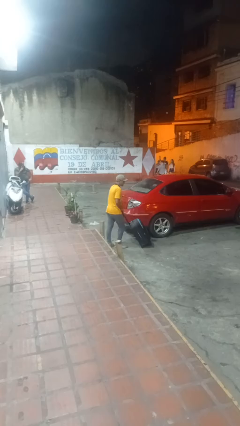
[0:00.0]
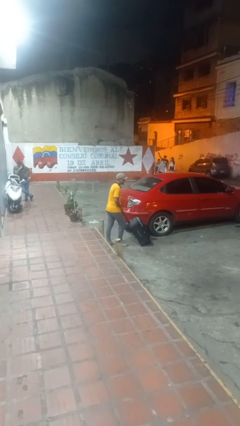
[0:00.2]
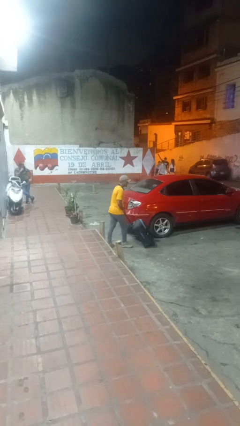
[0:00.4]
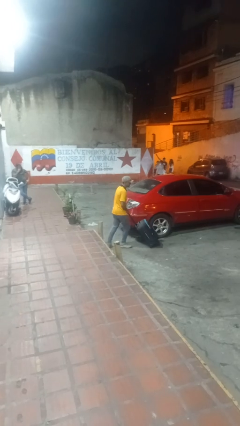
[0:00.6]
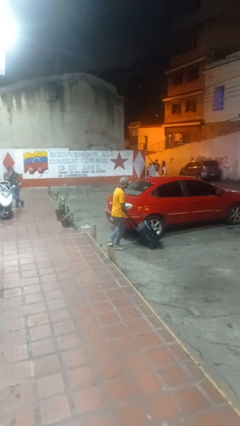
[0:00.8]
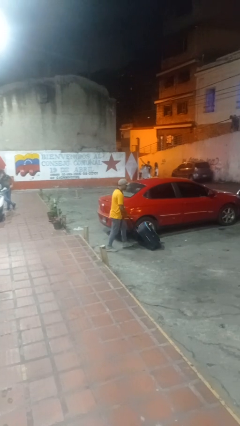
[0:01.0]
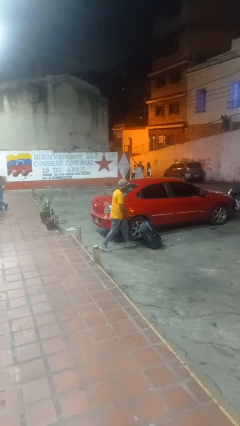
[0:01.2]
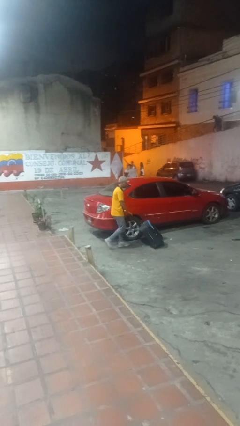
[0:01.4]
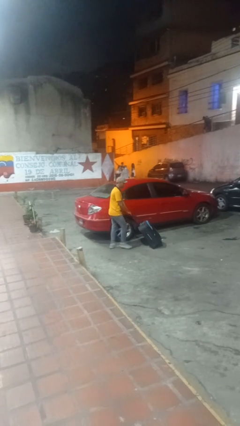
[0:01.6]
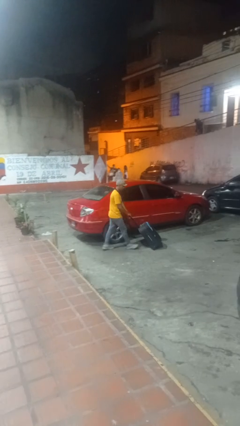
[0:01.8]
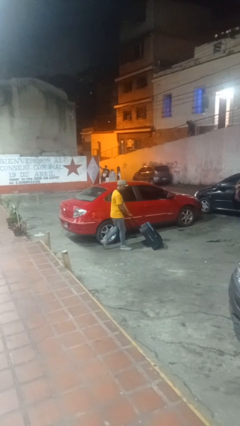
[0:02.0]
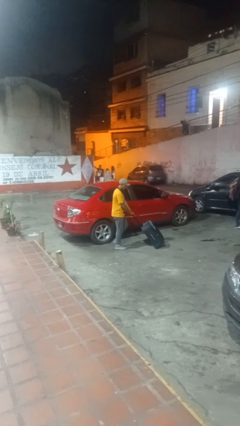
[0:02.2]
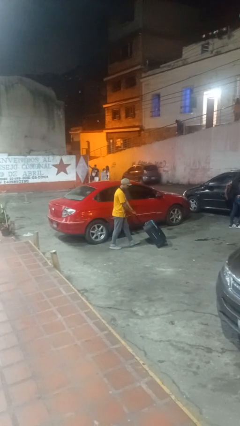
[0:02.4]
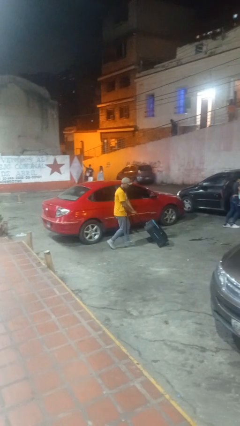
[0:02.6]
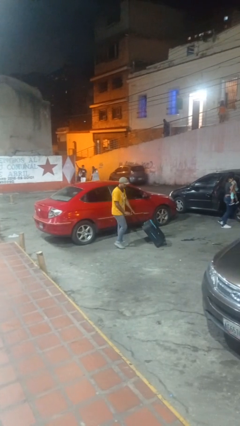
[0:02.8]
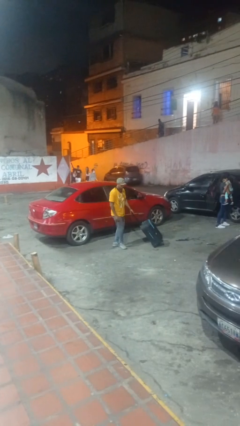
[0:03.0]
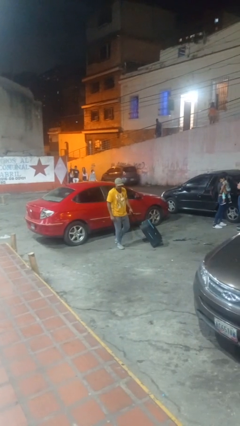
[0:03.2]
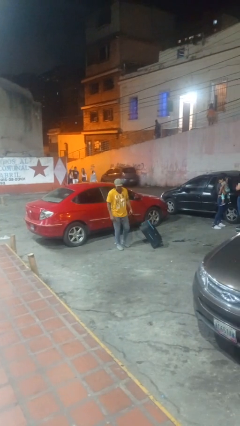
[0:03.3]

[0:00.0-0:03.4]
person pushes wheeled cart

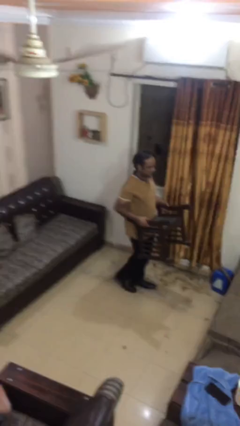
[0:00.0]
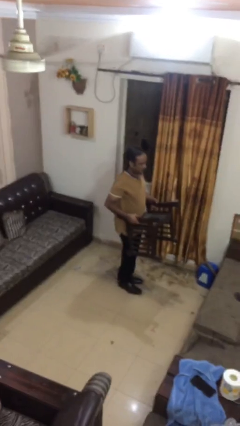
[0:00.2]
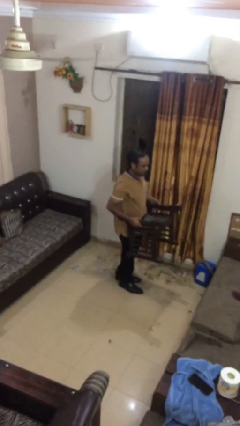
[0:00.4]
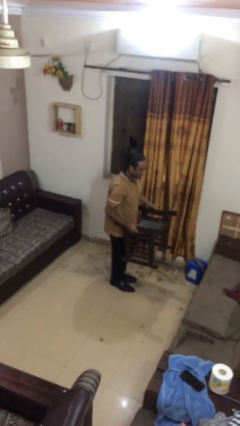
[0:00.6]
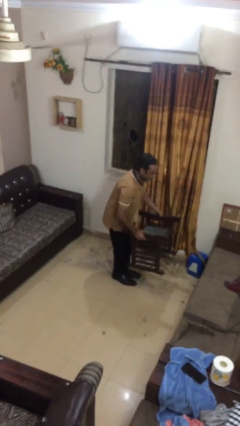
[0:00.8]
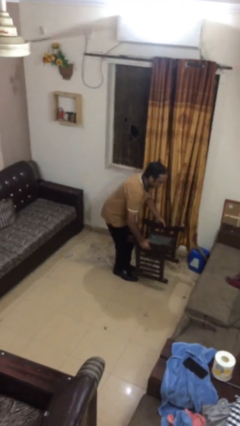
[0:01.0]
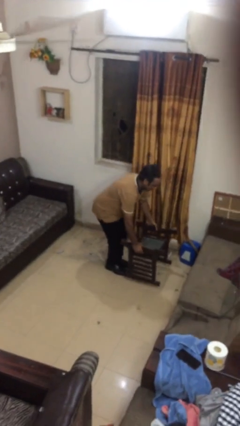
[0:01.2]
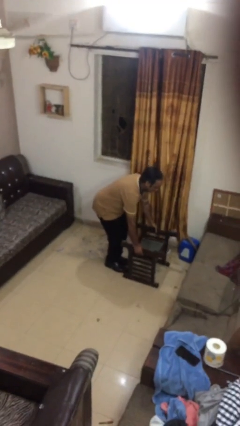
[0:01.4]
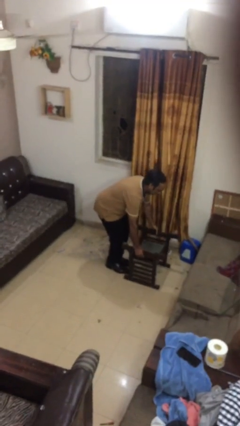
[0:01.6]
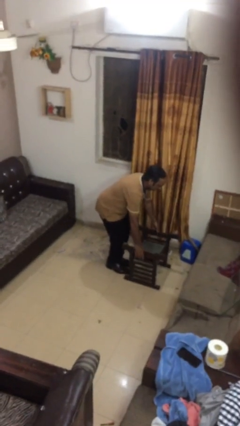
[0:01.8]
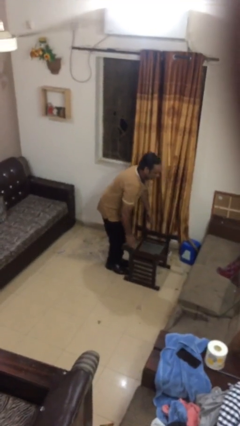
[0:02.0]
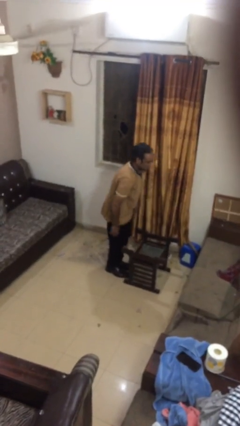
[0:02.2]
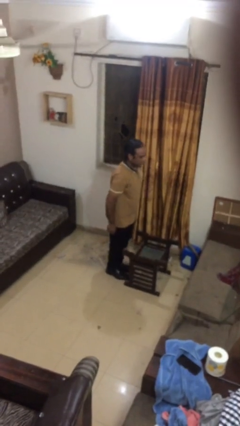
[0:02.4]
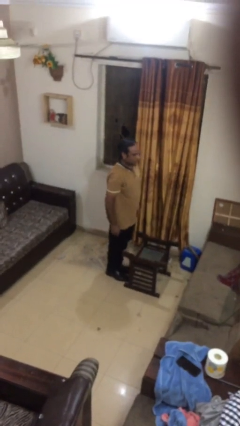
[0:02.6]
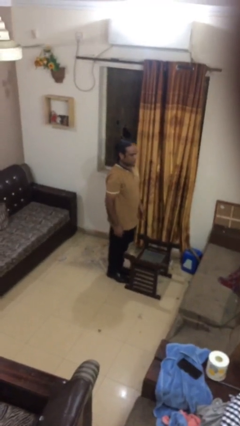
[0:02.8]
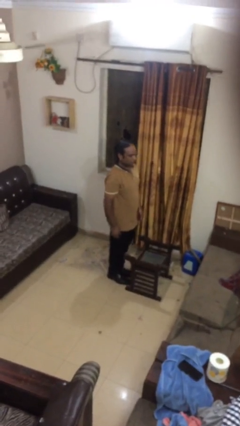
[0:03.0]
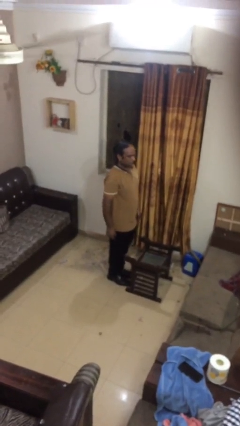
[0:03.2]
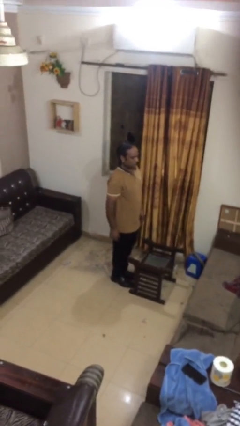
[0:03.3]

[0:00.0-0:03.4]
person puts down object on floor

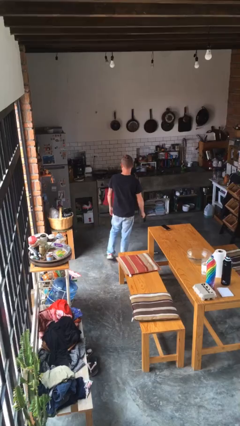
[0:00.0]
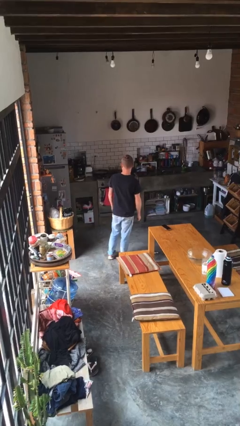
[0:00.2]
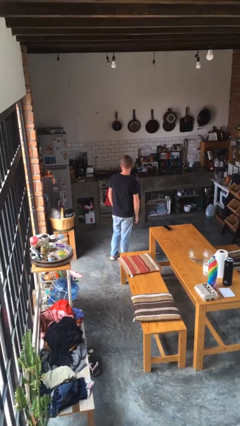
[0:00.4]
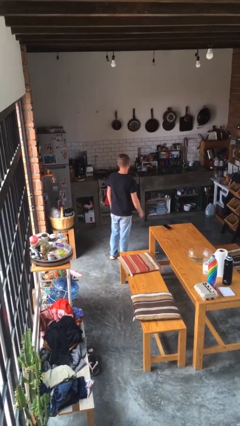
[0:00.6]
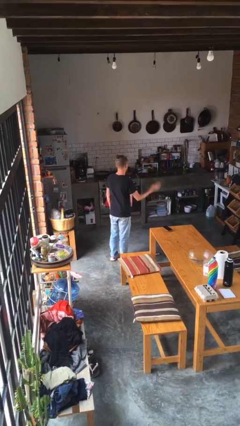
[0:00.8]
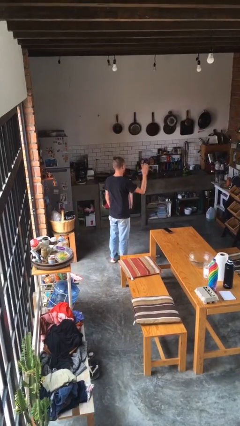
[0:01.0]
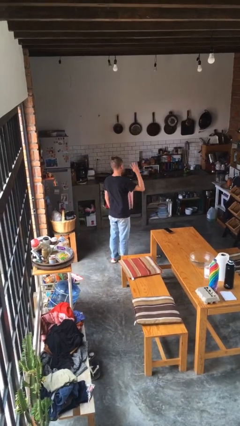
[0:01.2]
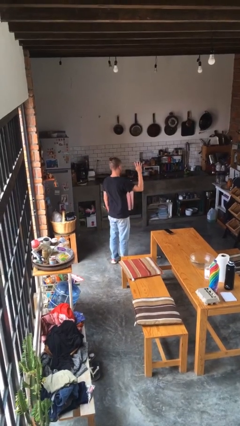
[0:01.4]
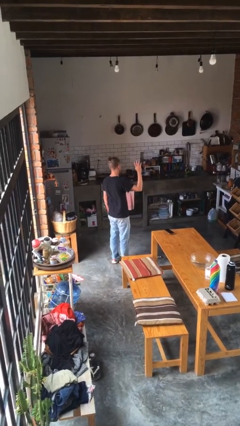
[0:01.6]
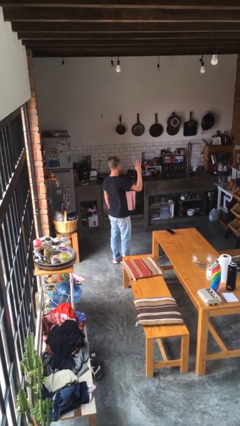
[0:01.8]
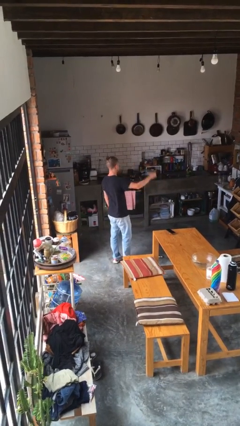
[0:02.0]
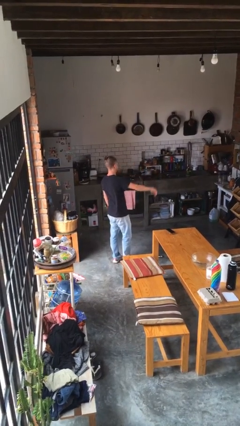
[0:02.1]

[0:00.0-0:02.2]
person gestures number four

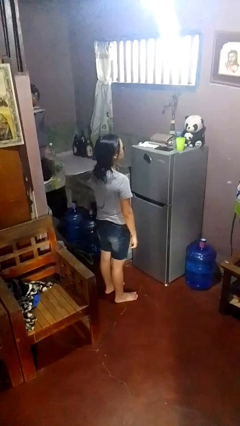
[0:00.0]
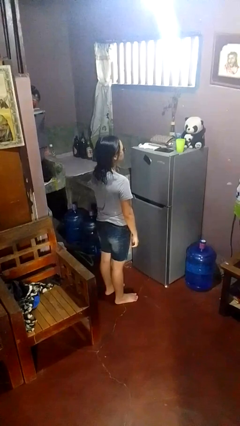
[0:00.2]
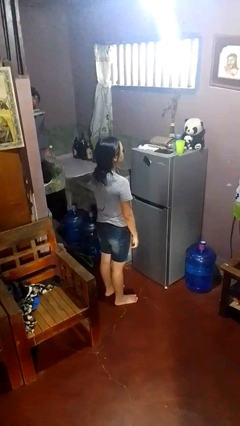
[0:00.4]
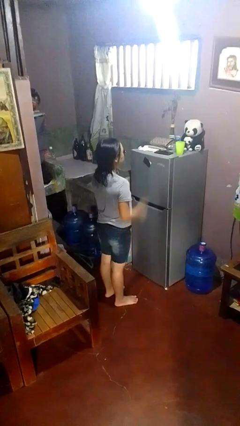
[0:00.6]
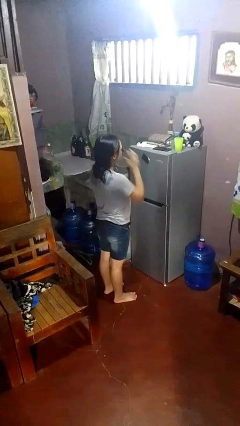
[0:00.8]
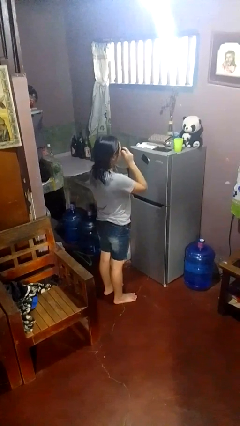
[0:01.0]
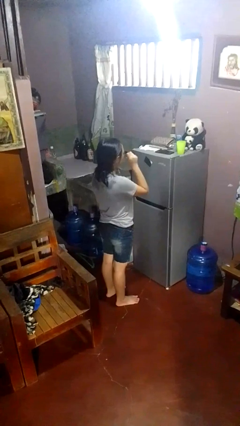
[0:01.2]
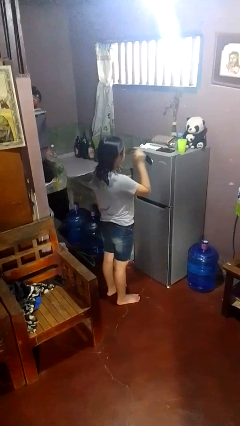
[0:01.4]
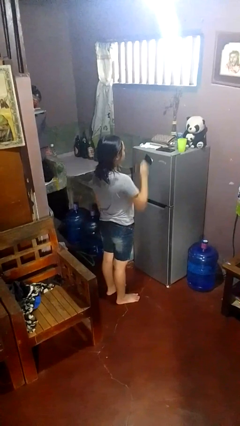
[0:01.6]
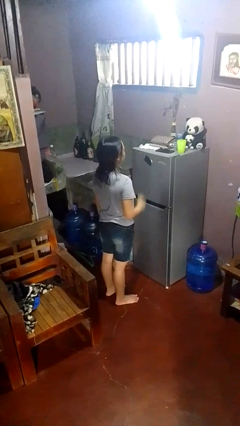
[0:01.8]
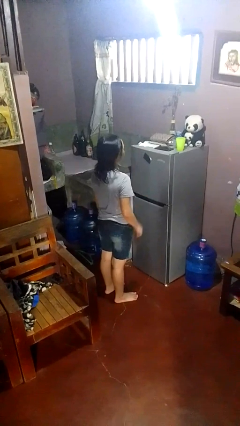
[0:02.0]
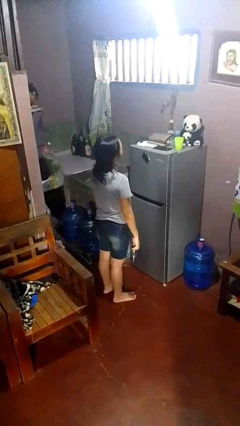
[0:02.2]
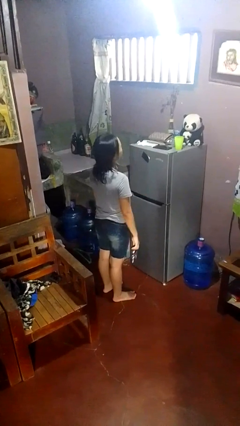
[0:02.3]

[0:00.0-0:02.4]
person takes off sunglasses

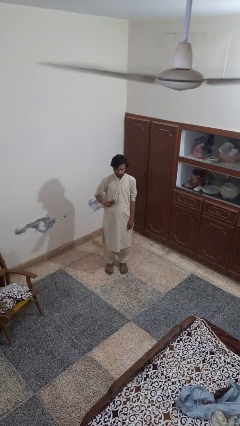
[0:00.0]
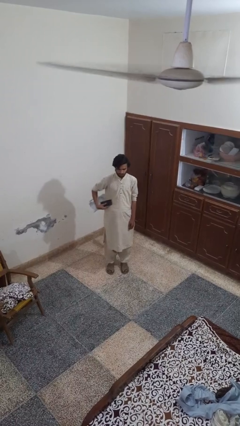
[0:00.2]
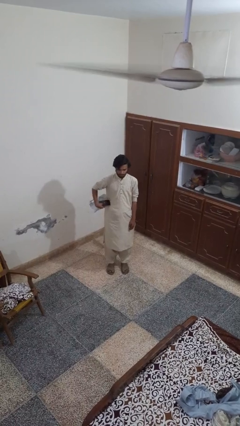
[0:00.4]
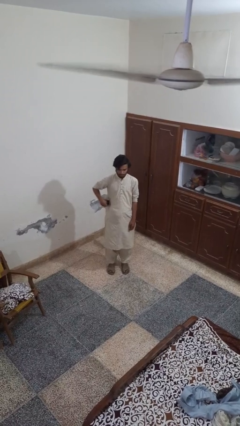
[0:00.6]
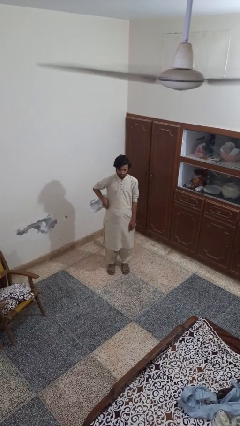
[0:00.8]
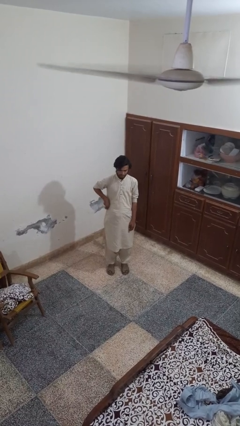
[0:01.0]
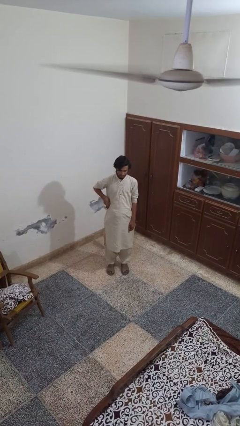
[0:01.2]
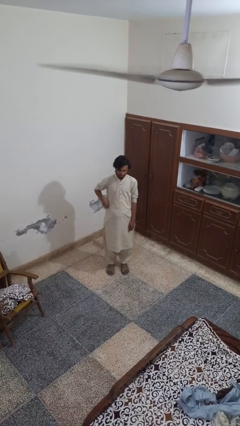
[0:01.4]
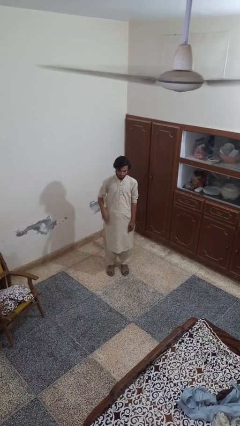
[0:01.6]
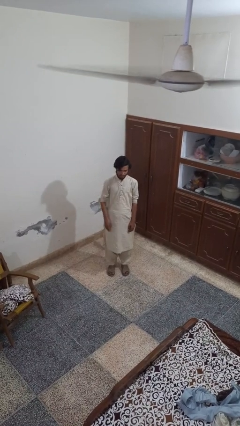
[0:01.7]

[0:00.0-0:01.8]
person puts phone into pocket

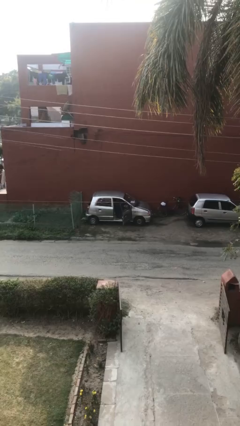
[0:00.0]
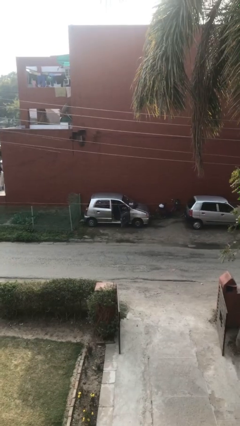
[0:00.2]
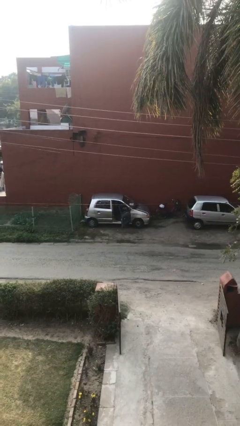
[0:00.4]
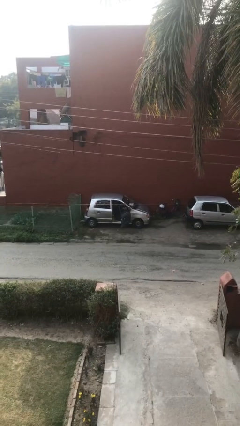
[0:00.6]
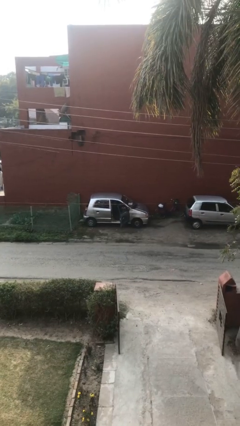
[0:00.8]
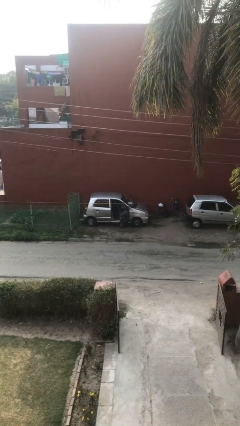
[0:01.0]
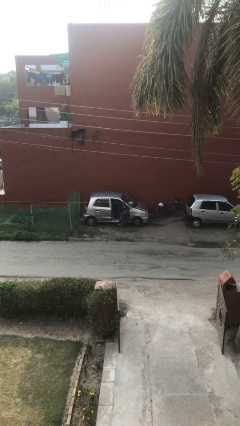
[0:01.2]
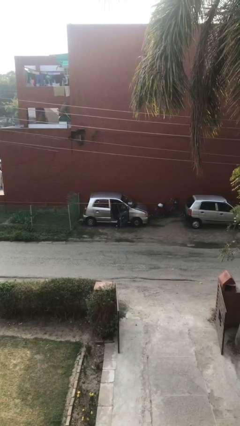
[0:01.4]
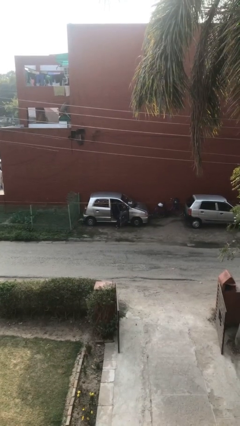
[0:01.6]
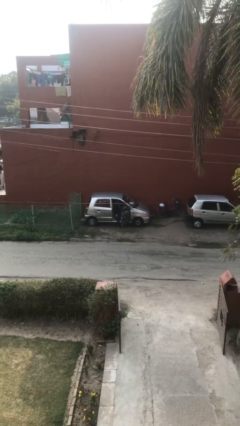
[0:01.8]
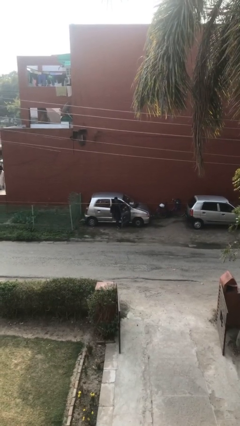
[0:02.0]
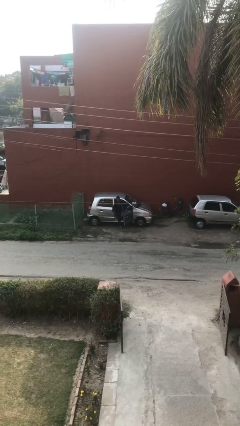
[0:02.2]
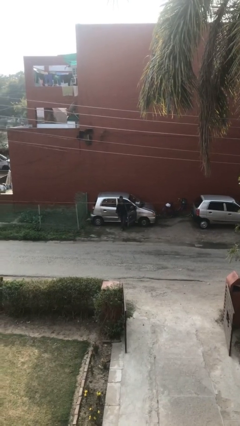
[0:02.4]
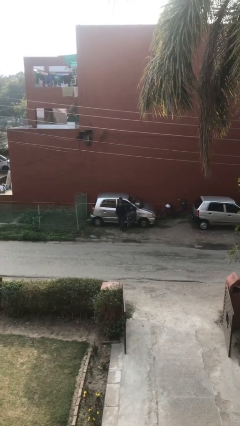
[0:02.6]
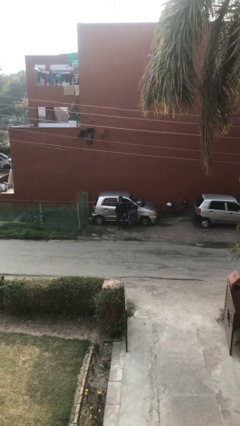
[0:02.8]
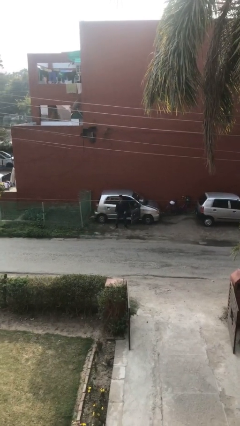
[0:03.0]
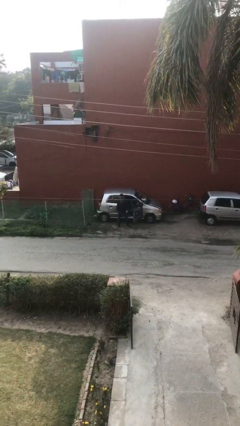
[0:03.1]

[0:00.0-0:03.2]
person exits car

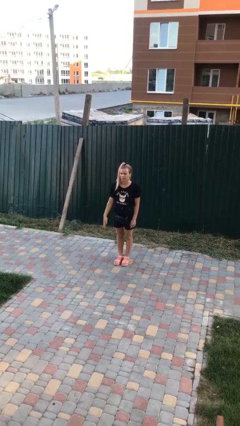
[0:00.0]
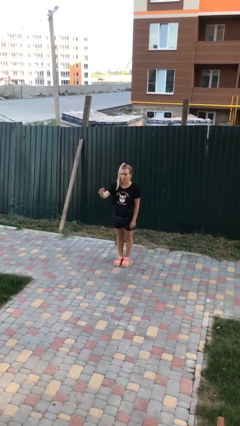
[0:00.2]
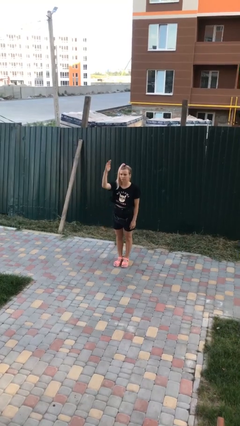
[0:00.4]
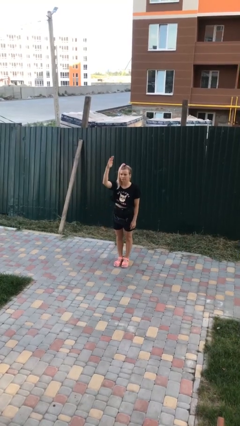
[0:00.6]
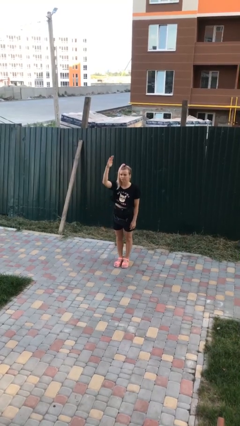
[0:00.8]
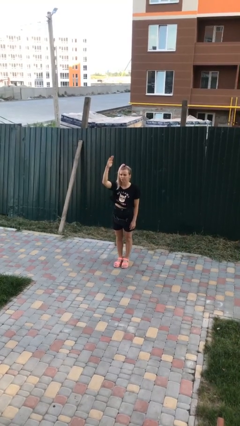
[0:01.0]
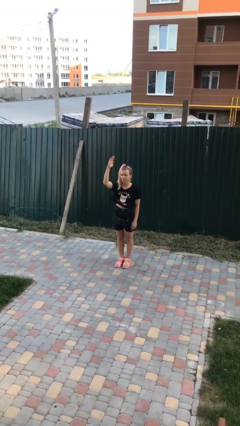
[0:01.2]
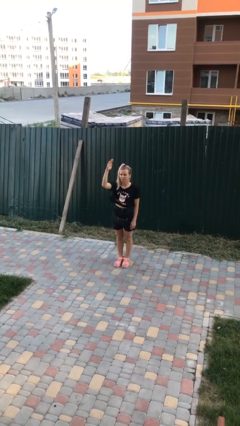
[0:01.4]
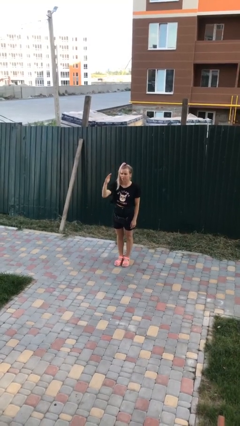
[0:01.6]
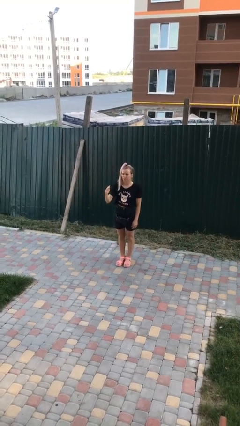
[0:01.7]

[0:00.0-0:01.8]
person gestures raise hand
